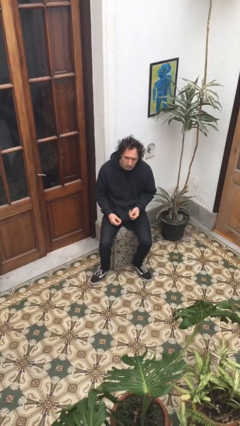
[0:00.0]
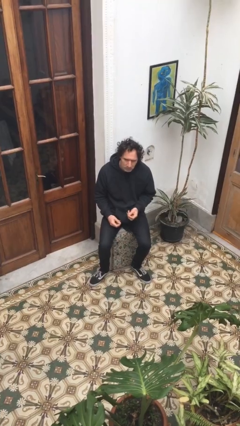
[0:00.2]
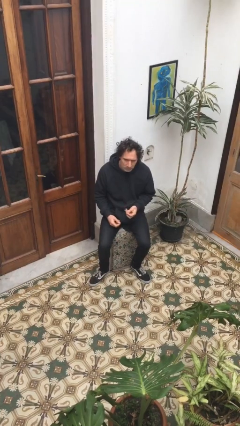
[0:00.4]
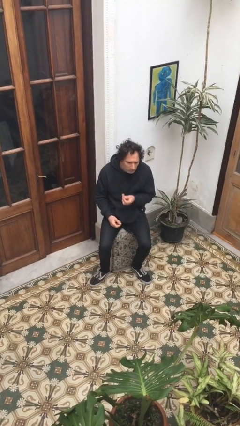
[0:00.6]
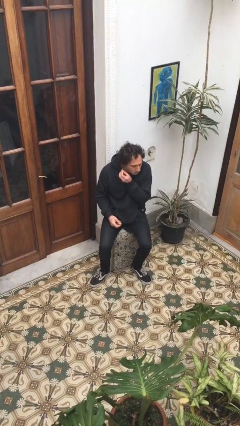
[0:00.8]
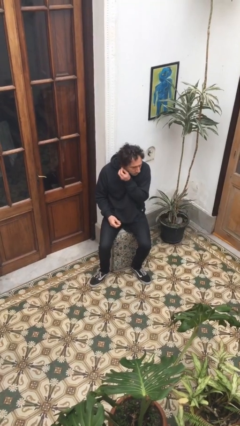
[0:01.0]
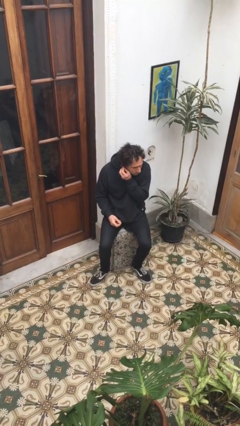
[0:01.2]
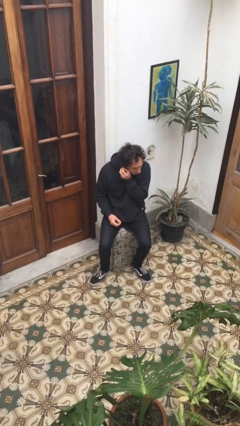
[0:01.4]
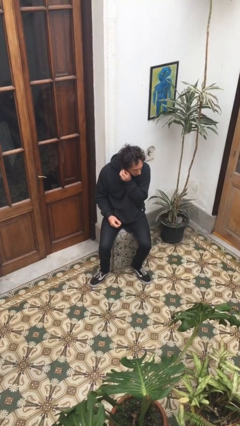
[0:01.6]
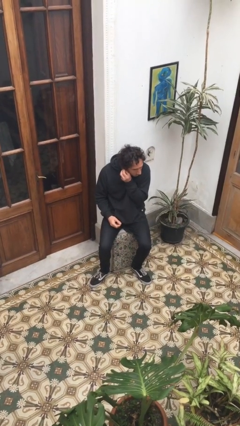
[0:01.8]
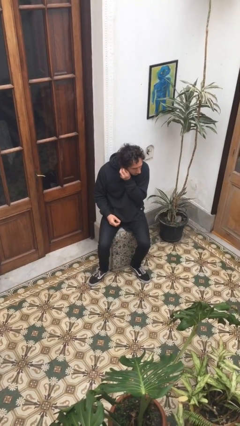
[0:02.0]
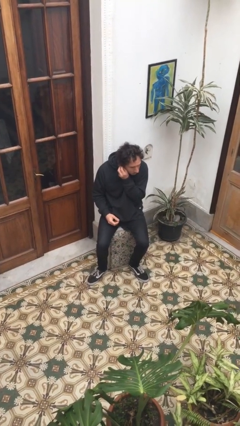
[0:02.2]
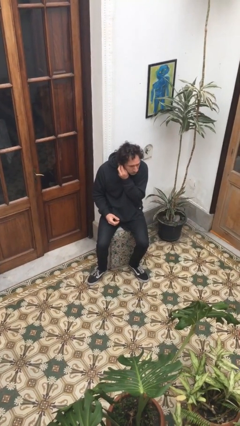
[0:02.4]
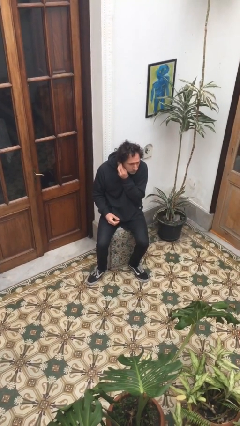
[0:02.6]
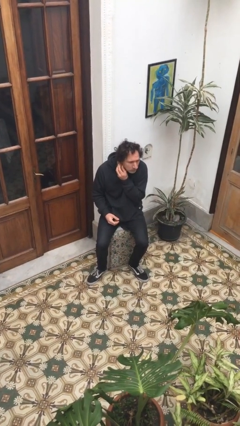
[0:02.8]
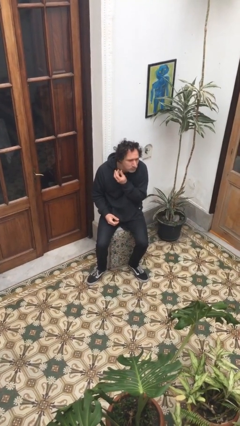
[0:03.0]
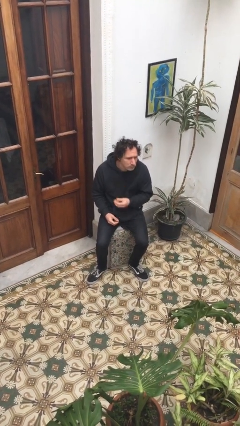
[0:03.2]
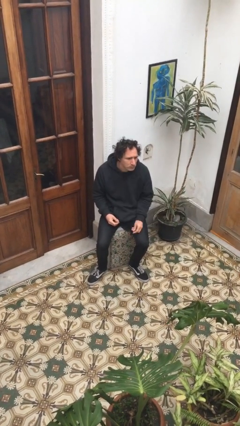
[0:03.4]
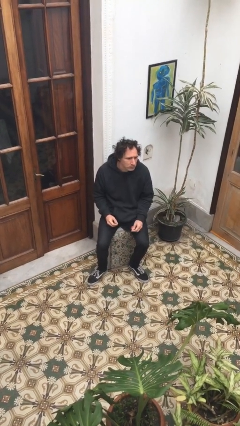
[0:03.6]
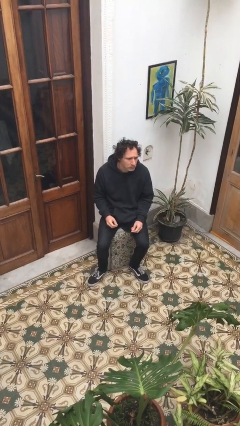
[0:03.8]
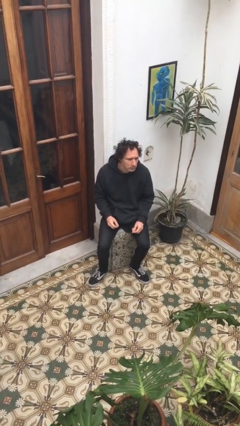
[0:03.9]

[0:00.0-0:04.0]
person puts on earrings

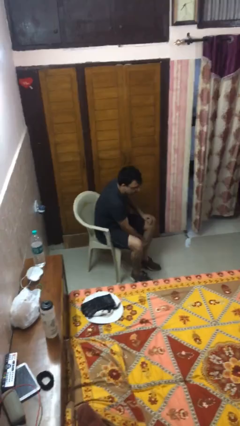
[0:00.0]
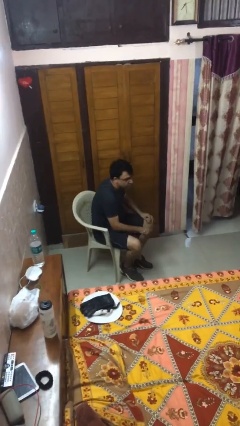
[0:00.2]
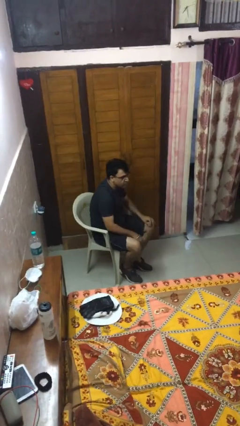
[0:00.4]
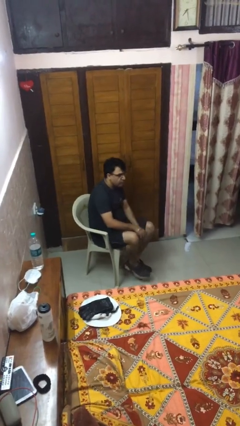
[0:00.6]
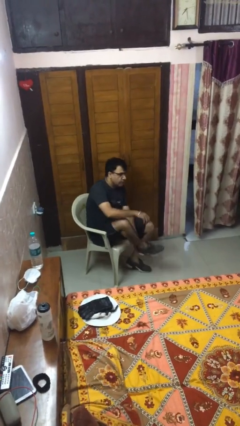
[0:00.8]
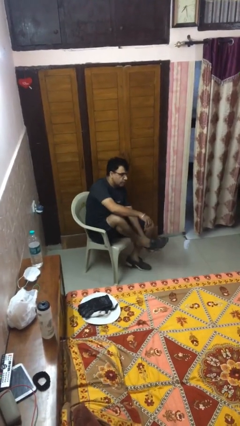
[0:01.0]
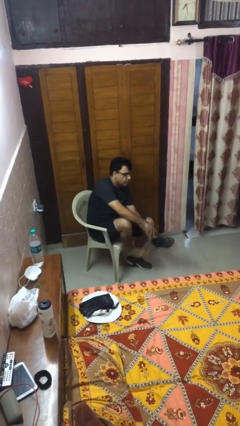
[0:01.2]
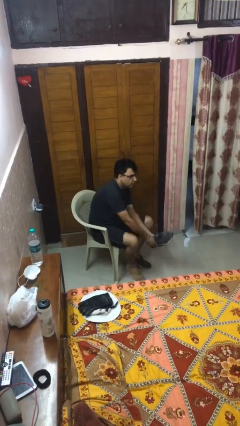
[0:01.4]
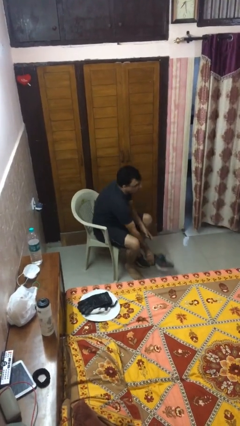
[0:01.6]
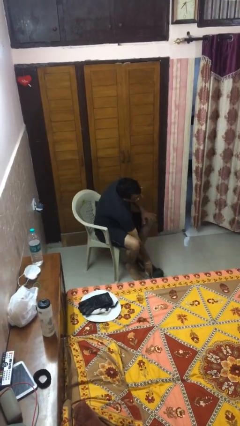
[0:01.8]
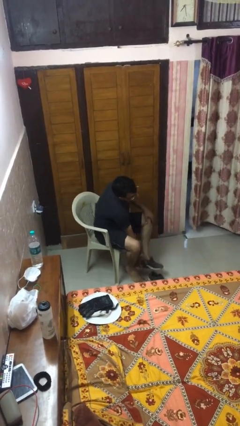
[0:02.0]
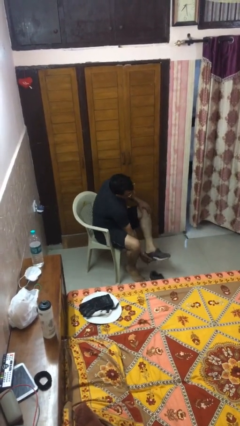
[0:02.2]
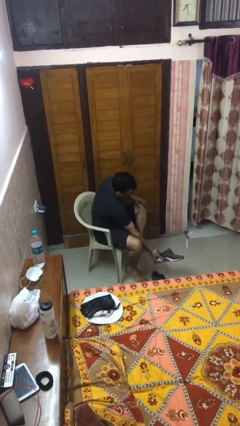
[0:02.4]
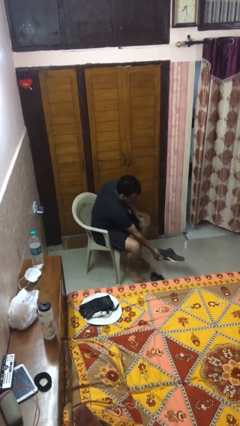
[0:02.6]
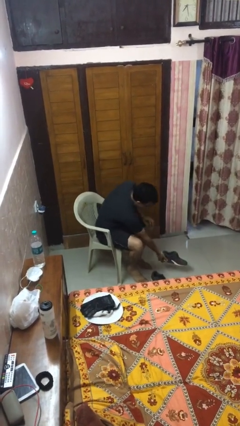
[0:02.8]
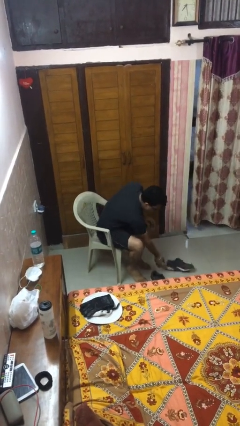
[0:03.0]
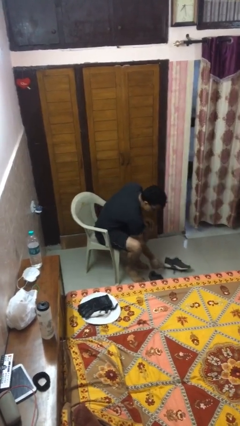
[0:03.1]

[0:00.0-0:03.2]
person takes off shoes

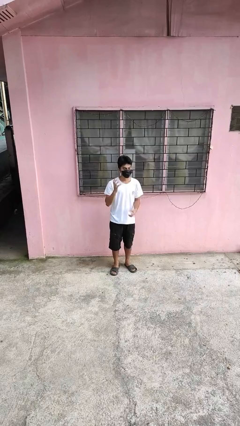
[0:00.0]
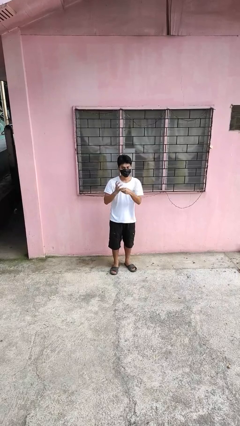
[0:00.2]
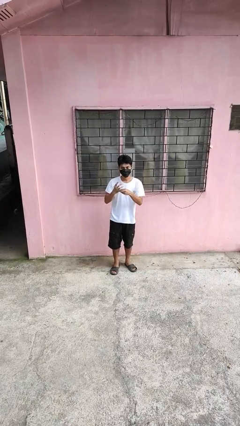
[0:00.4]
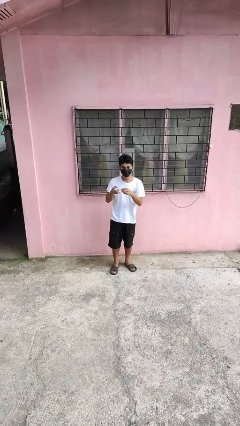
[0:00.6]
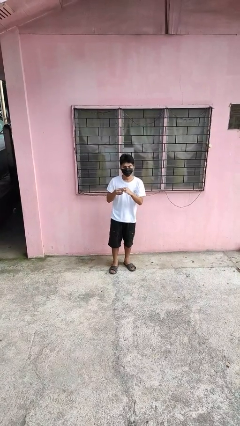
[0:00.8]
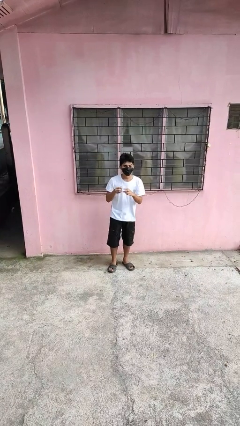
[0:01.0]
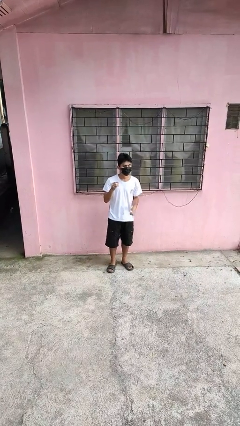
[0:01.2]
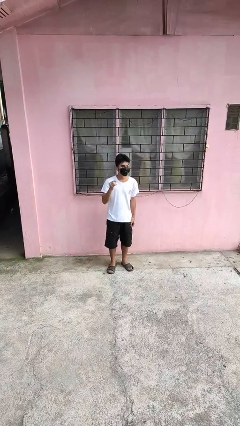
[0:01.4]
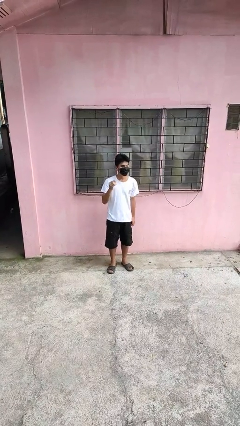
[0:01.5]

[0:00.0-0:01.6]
person takes off ring

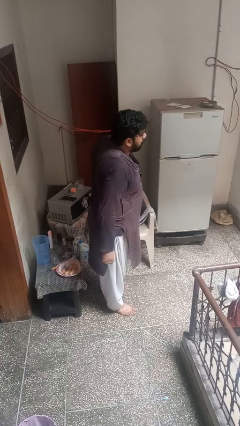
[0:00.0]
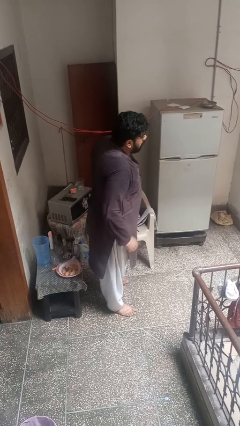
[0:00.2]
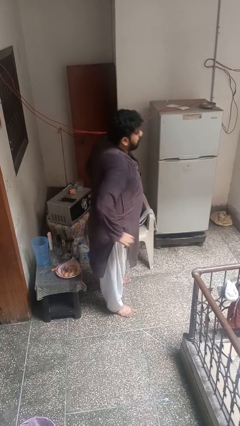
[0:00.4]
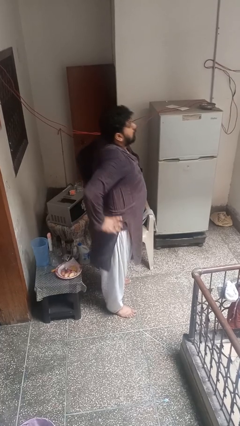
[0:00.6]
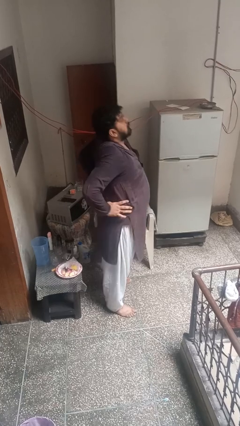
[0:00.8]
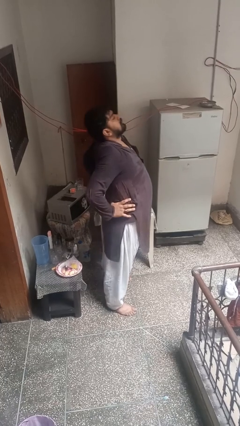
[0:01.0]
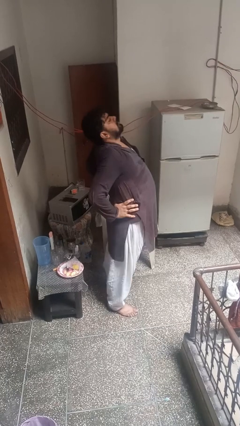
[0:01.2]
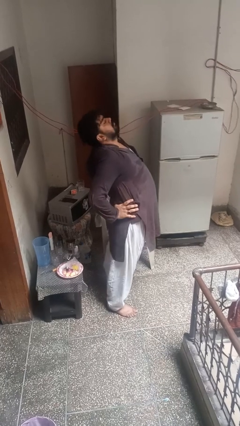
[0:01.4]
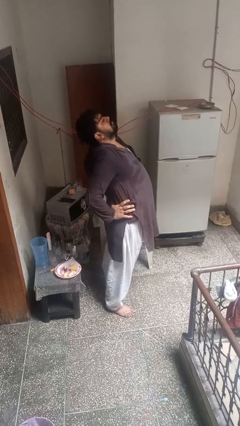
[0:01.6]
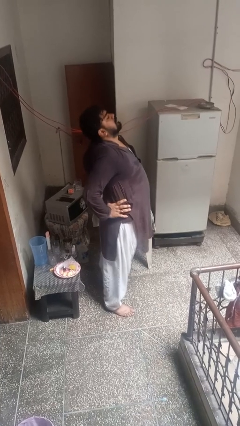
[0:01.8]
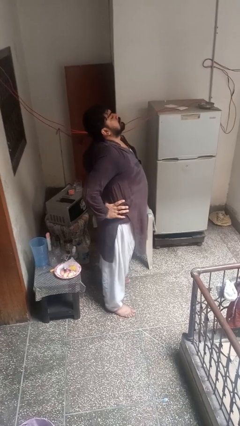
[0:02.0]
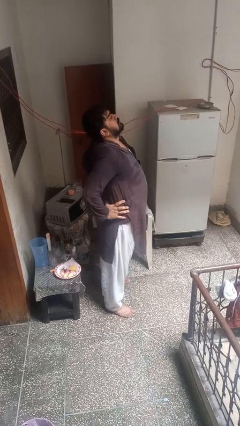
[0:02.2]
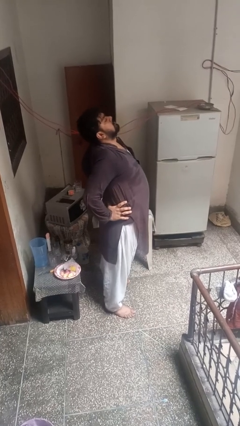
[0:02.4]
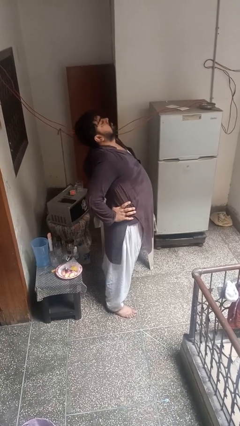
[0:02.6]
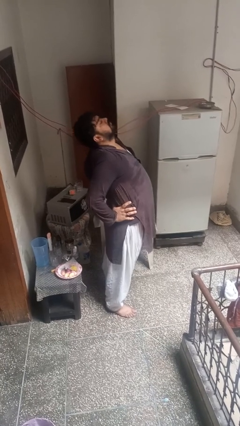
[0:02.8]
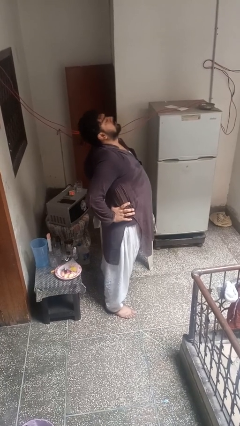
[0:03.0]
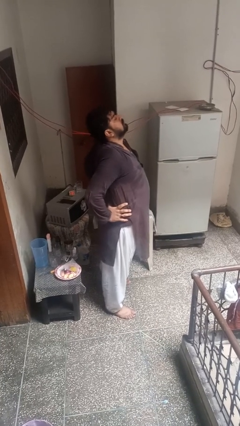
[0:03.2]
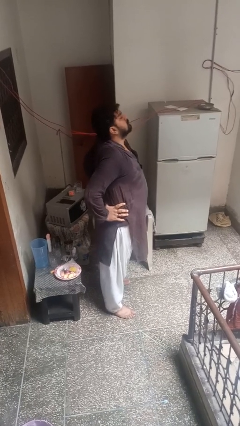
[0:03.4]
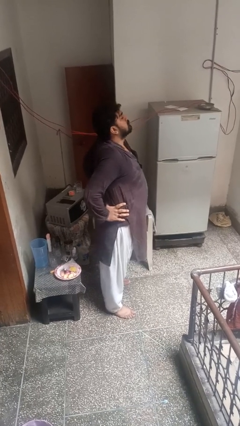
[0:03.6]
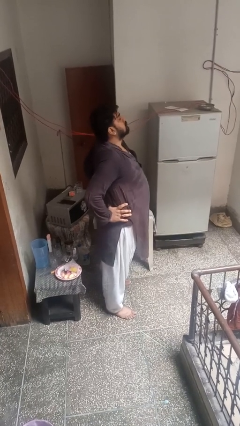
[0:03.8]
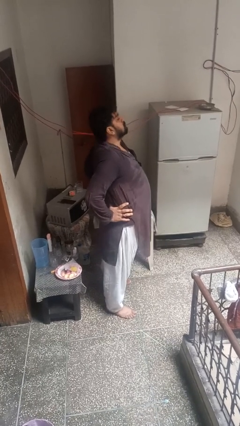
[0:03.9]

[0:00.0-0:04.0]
person stretches back

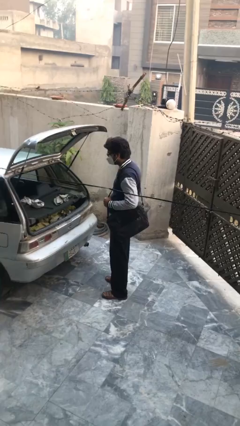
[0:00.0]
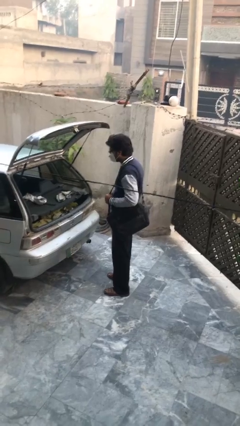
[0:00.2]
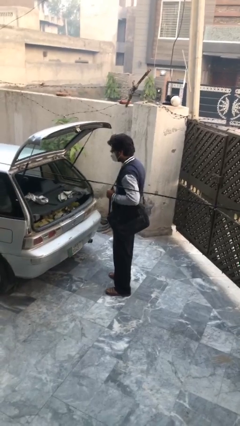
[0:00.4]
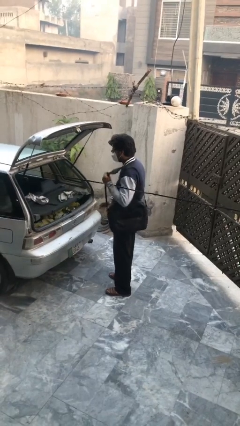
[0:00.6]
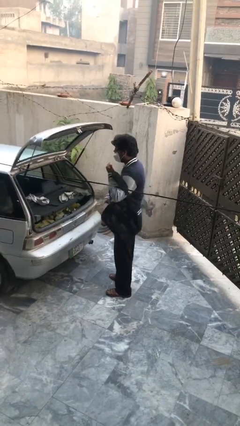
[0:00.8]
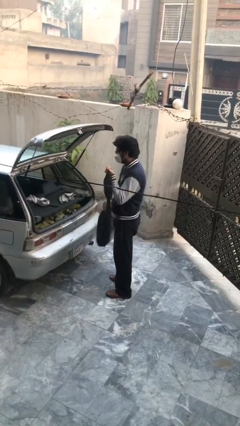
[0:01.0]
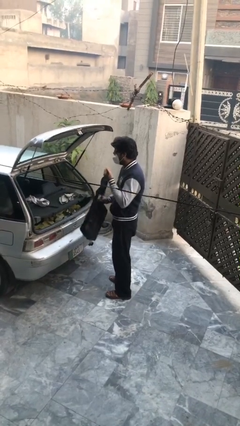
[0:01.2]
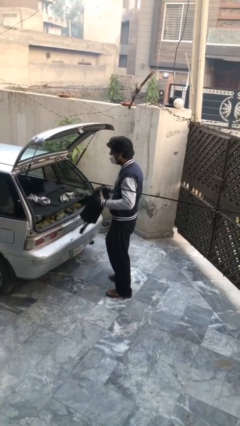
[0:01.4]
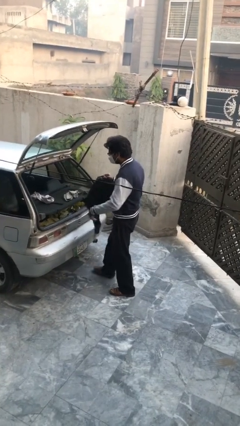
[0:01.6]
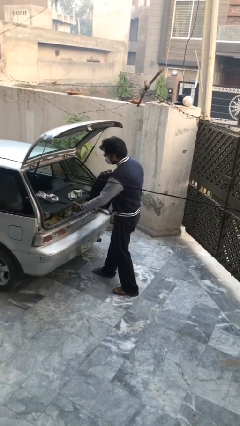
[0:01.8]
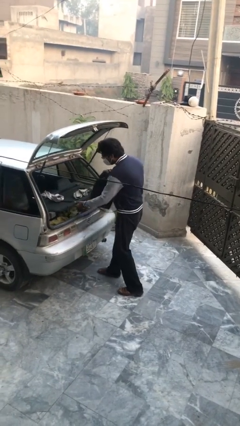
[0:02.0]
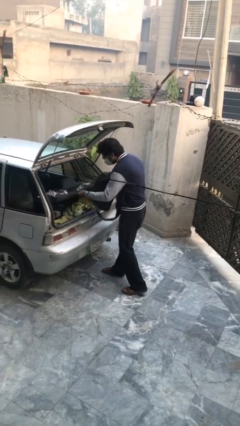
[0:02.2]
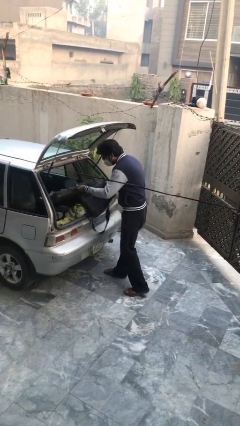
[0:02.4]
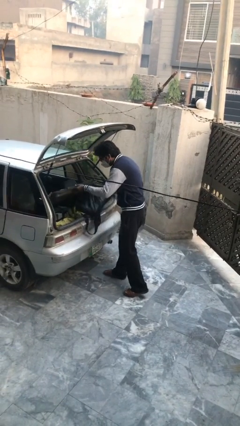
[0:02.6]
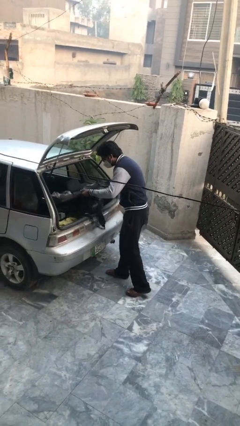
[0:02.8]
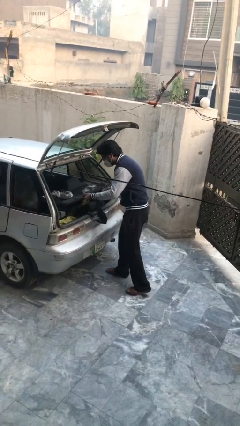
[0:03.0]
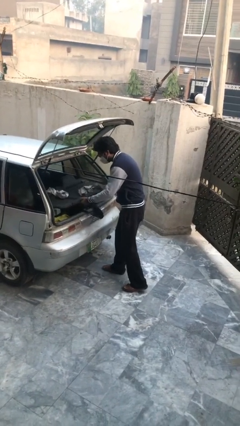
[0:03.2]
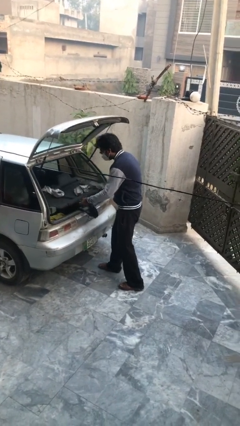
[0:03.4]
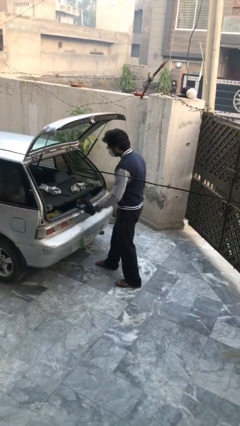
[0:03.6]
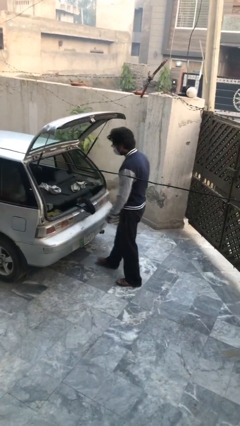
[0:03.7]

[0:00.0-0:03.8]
person loads car

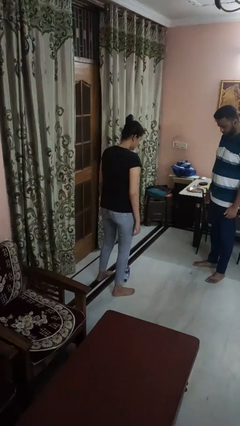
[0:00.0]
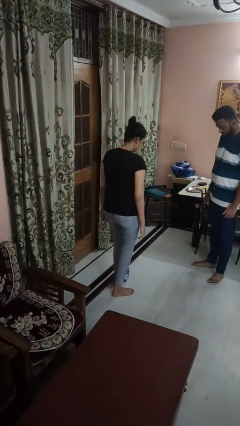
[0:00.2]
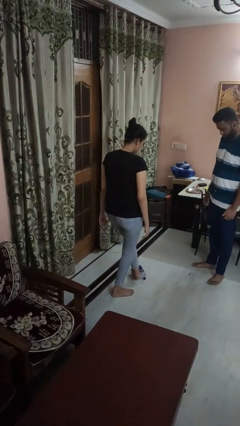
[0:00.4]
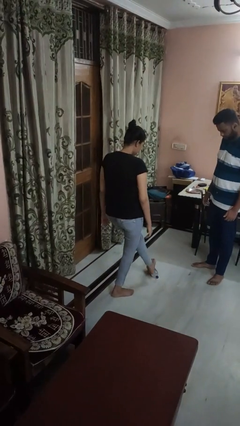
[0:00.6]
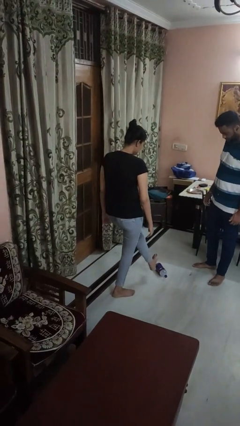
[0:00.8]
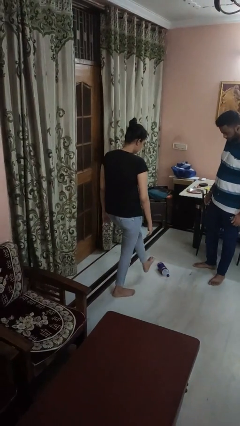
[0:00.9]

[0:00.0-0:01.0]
person kicks object to person
